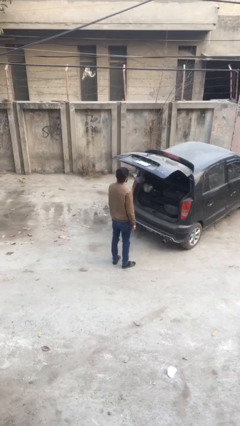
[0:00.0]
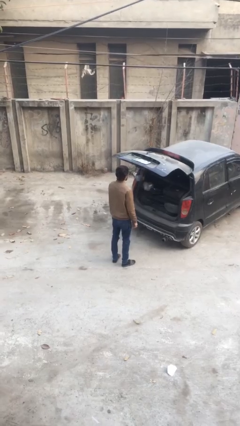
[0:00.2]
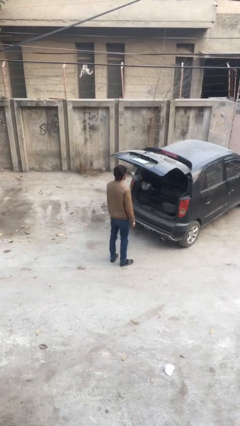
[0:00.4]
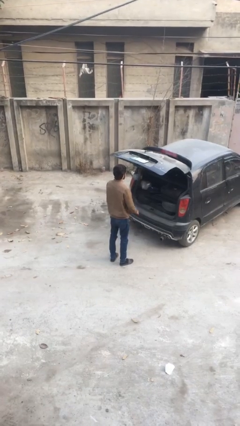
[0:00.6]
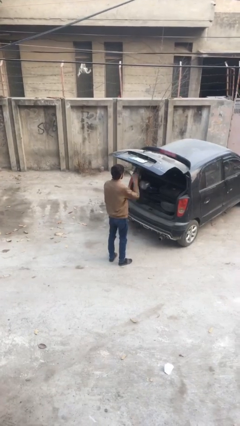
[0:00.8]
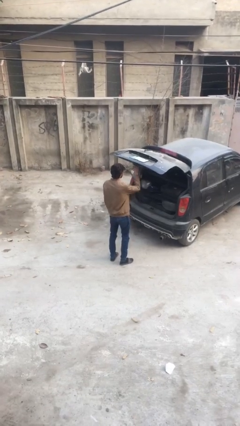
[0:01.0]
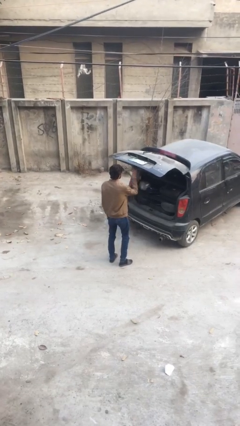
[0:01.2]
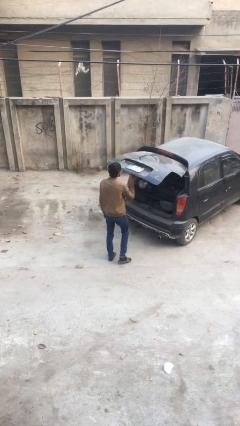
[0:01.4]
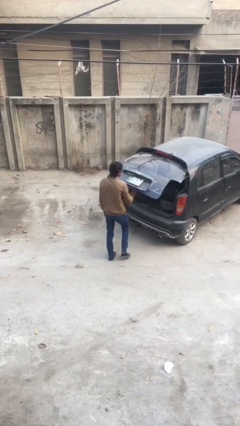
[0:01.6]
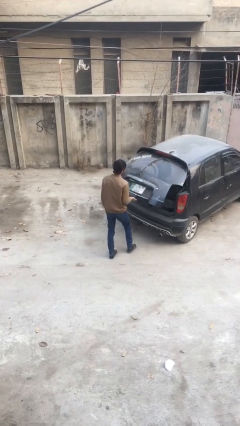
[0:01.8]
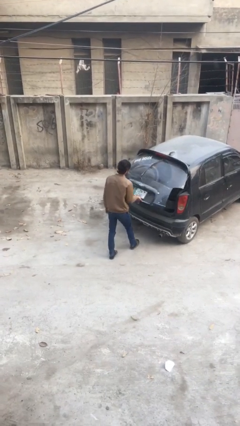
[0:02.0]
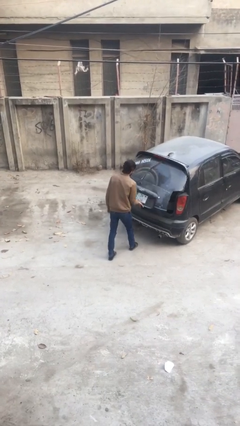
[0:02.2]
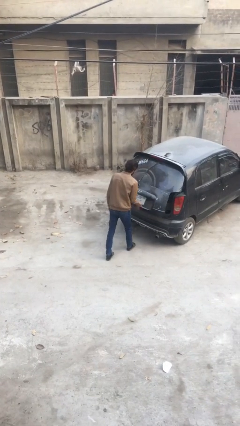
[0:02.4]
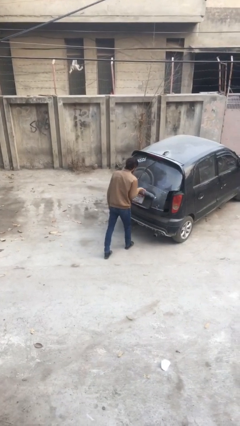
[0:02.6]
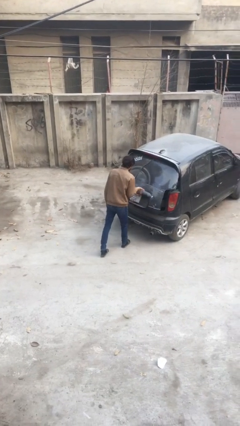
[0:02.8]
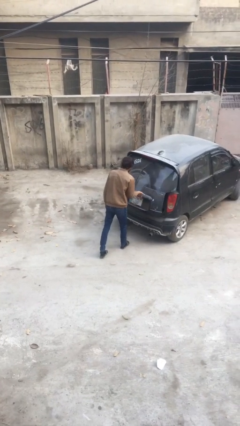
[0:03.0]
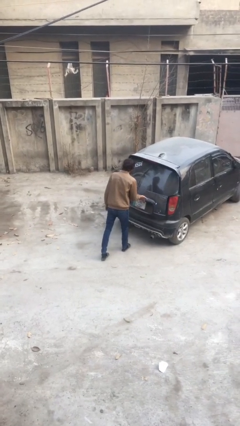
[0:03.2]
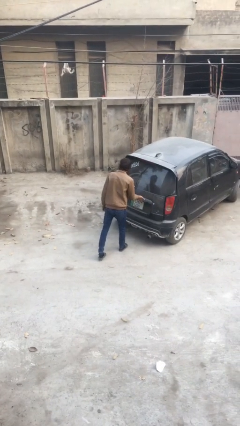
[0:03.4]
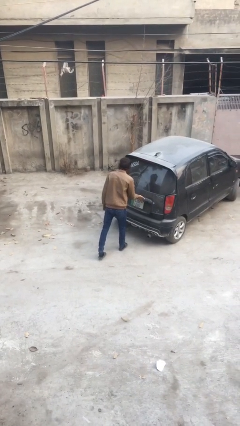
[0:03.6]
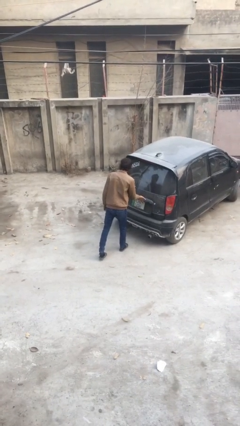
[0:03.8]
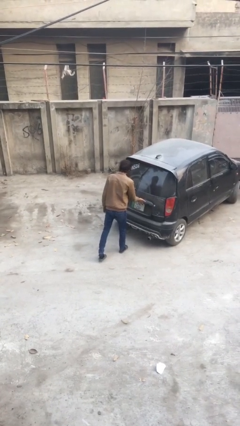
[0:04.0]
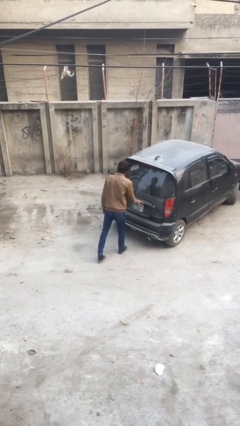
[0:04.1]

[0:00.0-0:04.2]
person closes car trunk

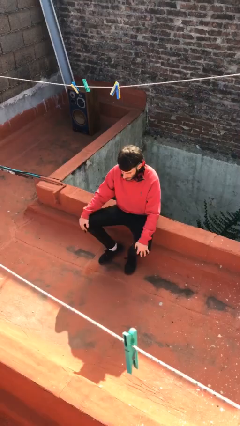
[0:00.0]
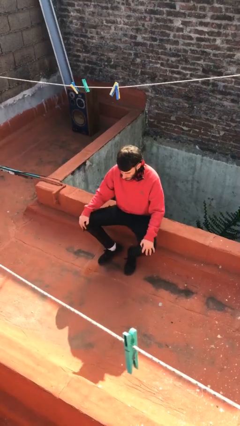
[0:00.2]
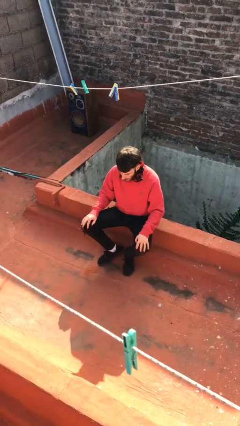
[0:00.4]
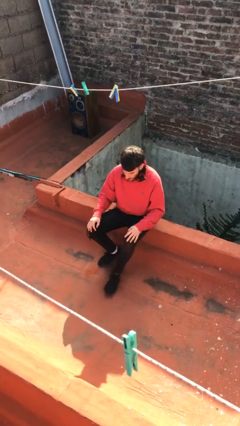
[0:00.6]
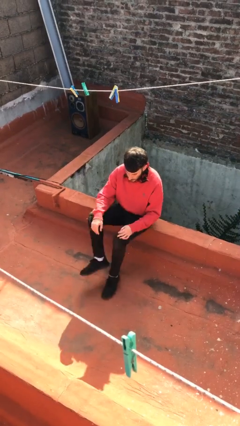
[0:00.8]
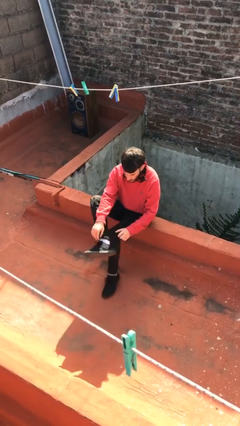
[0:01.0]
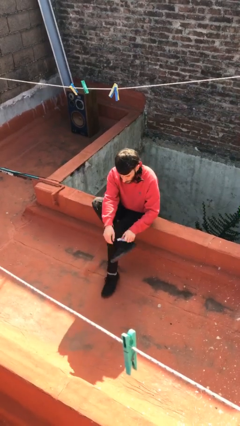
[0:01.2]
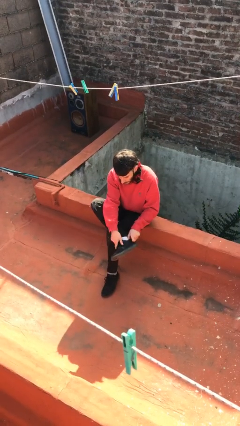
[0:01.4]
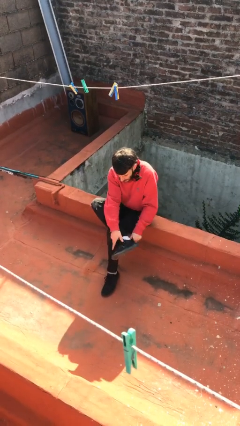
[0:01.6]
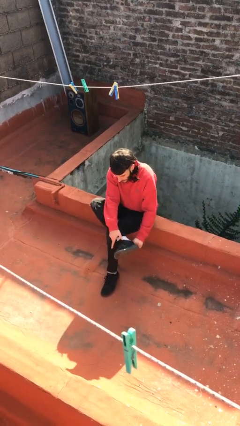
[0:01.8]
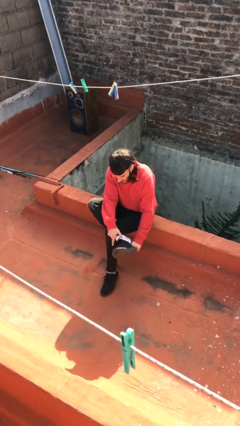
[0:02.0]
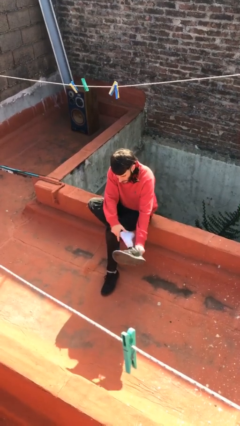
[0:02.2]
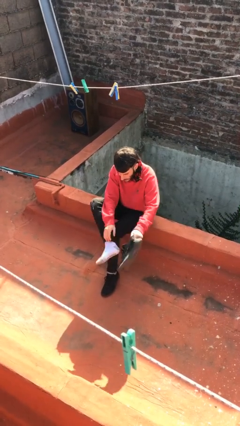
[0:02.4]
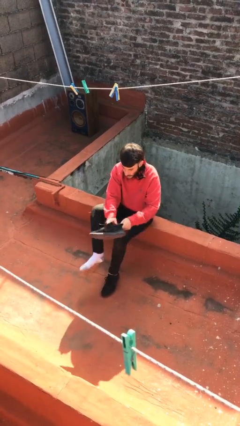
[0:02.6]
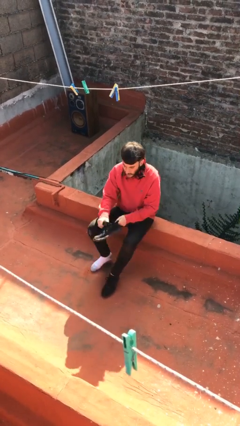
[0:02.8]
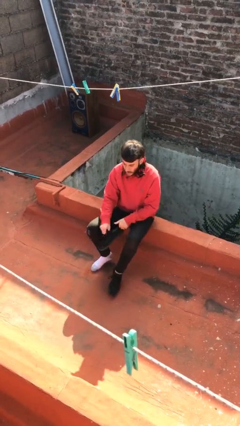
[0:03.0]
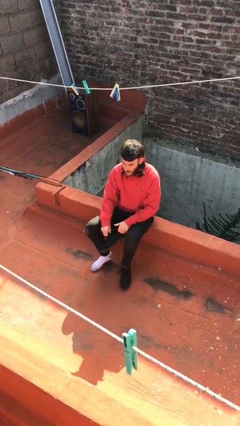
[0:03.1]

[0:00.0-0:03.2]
person takes off shoes

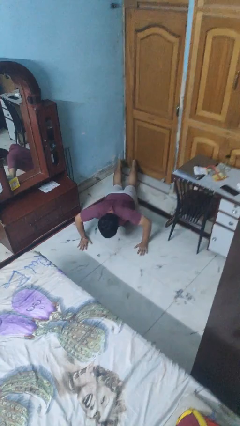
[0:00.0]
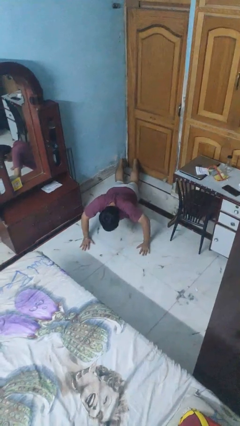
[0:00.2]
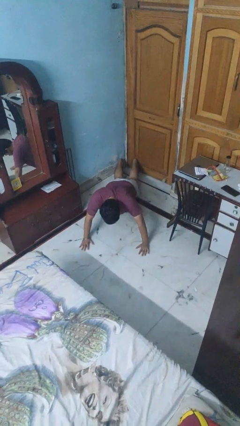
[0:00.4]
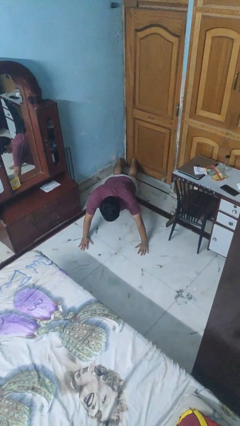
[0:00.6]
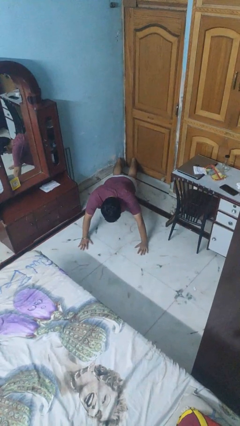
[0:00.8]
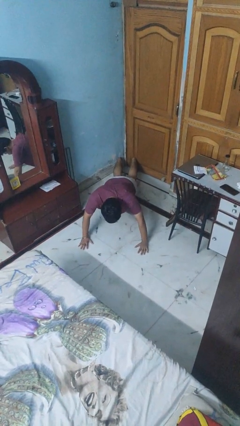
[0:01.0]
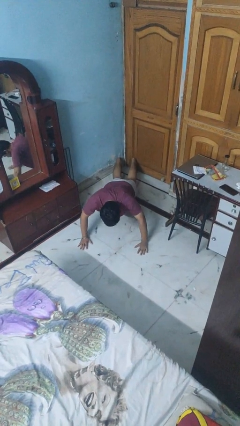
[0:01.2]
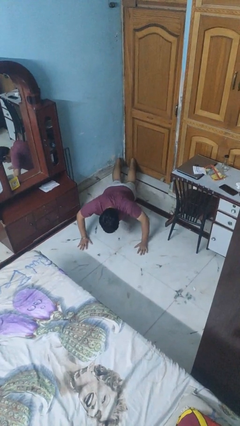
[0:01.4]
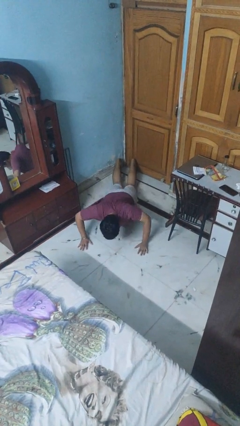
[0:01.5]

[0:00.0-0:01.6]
person exercises with pushup

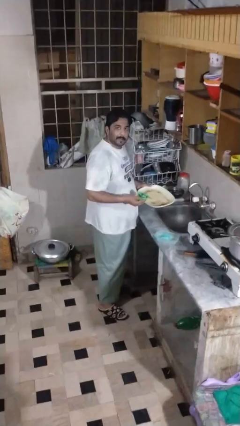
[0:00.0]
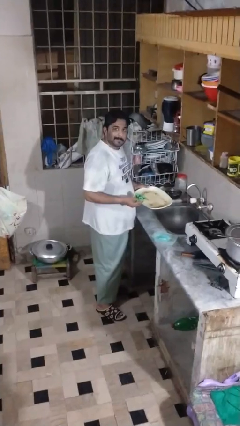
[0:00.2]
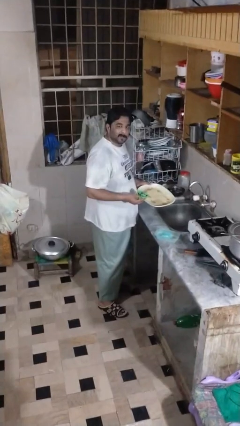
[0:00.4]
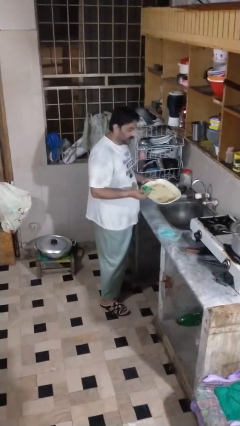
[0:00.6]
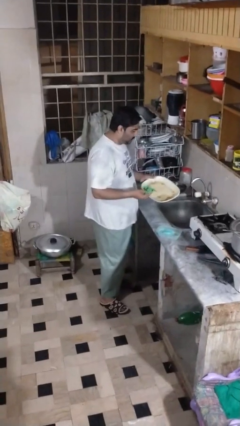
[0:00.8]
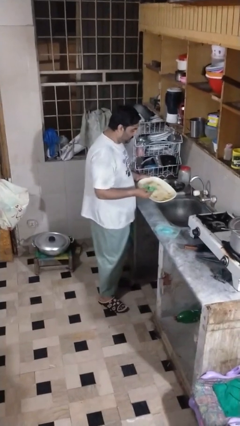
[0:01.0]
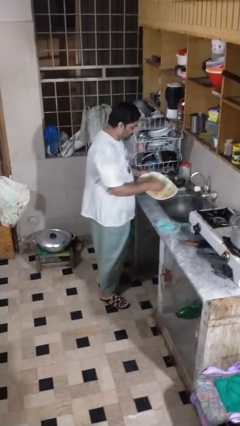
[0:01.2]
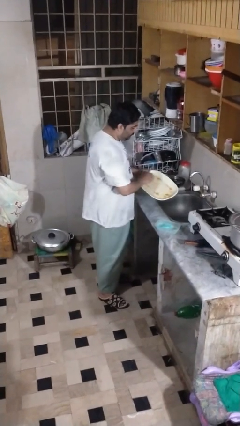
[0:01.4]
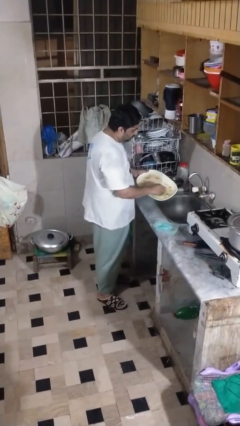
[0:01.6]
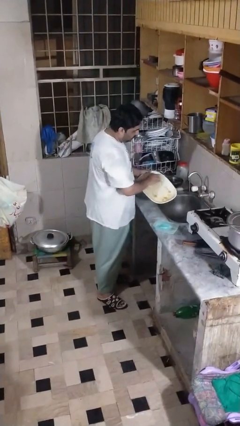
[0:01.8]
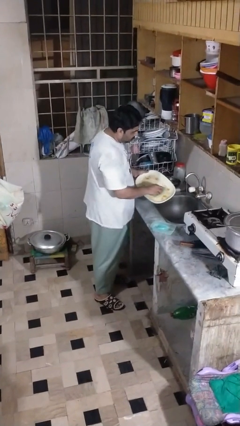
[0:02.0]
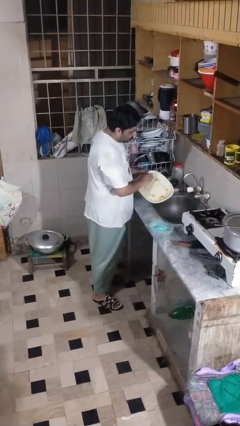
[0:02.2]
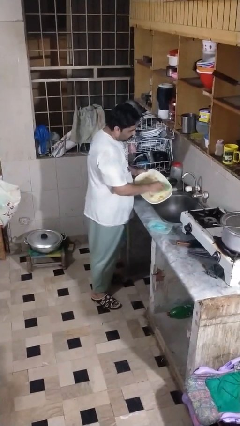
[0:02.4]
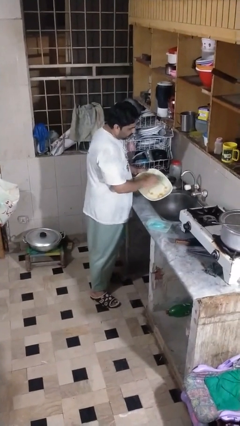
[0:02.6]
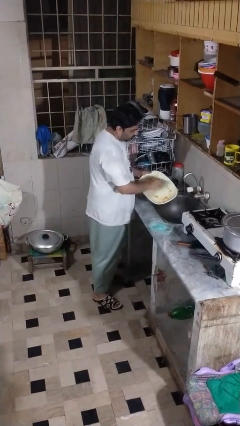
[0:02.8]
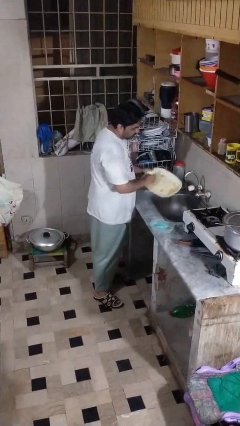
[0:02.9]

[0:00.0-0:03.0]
person washes dish

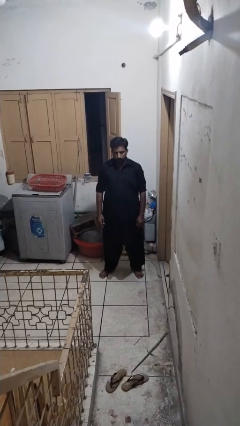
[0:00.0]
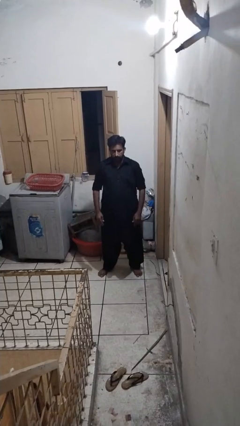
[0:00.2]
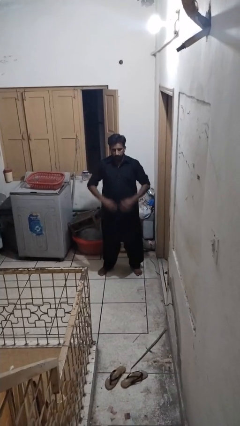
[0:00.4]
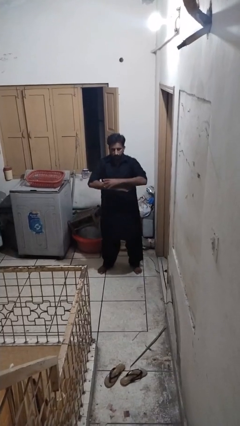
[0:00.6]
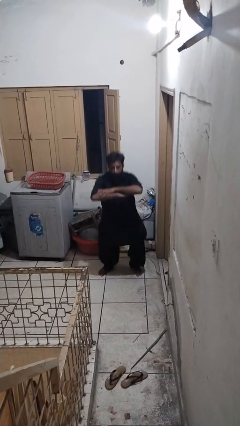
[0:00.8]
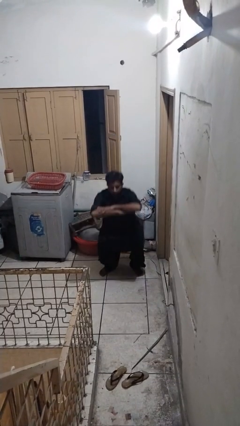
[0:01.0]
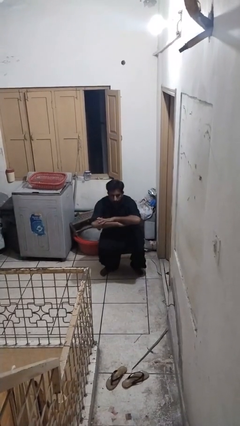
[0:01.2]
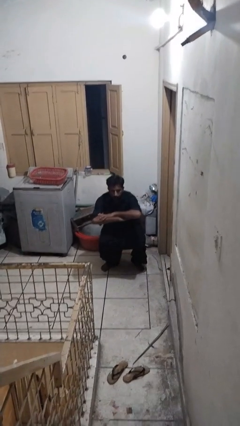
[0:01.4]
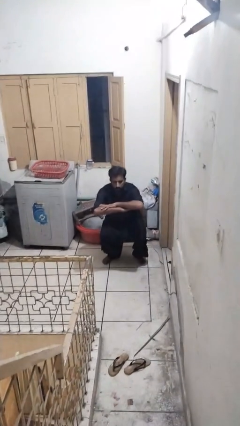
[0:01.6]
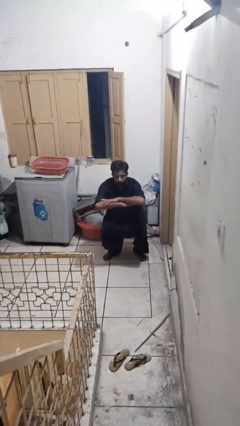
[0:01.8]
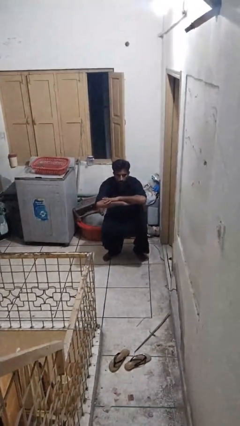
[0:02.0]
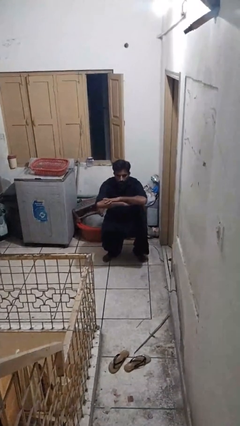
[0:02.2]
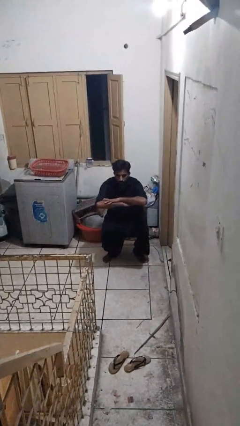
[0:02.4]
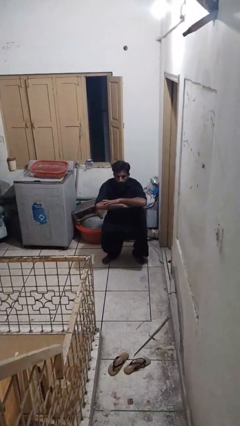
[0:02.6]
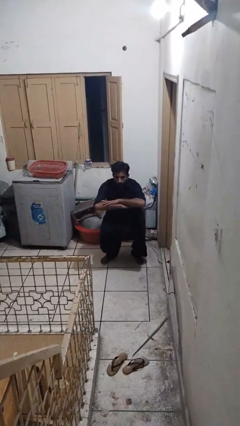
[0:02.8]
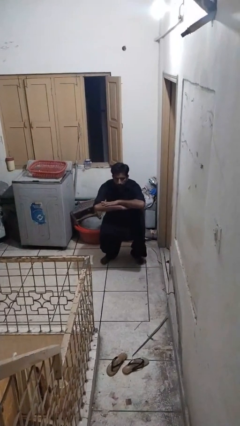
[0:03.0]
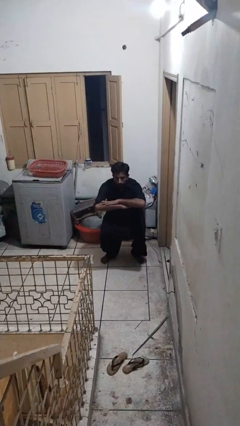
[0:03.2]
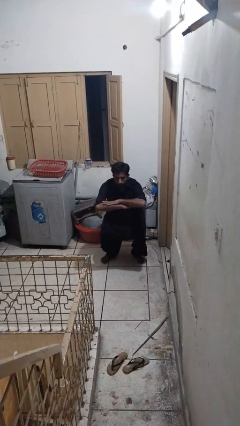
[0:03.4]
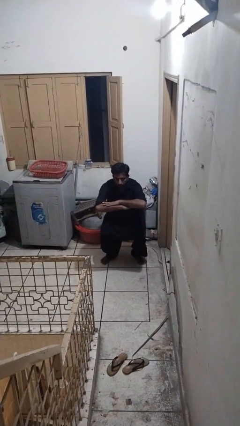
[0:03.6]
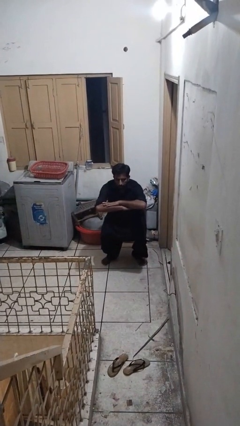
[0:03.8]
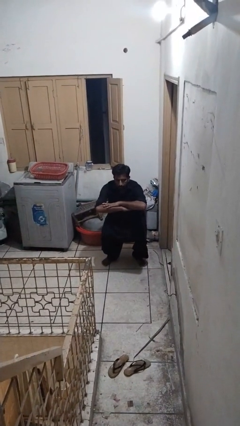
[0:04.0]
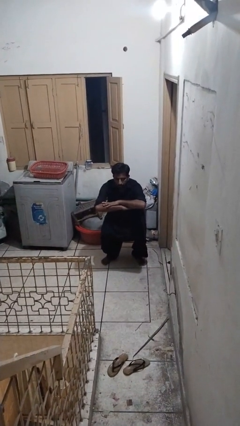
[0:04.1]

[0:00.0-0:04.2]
person squats

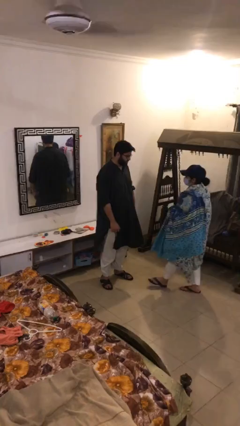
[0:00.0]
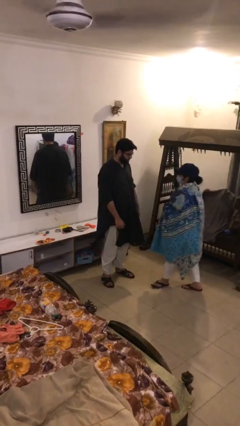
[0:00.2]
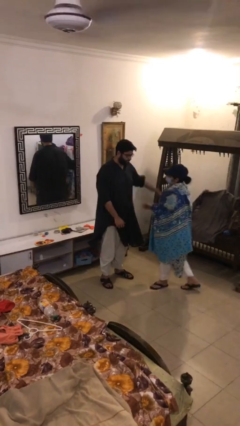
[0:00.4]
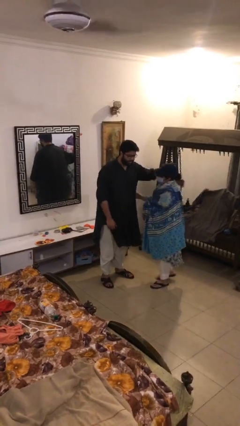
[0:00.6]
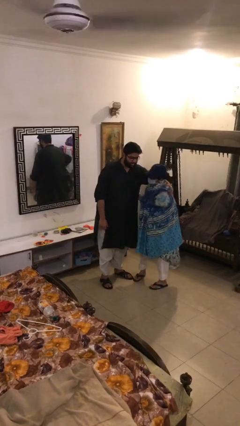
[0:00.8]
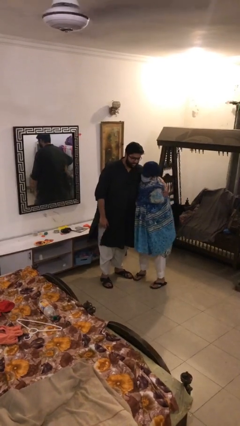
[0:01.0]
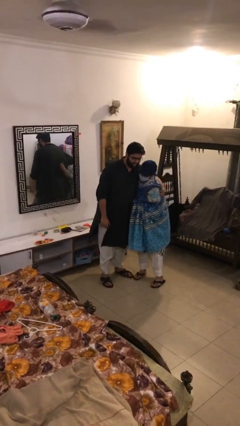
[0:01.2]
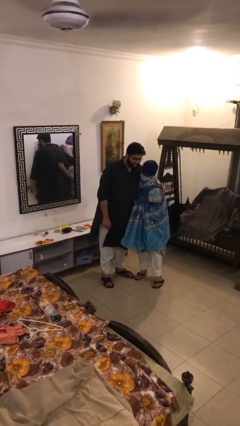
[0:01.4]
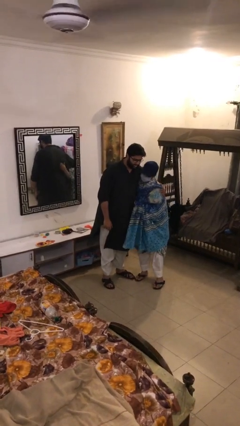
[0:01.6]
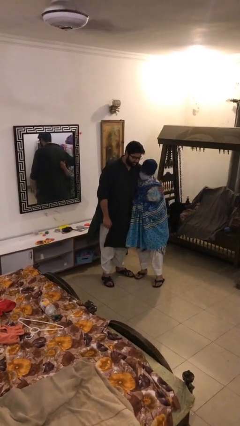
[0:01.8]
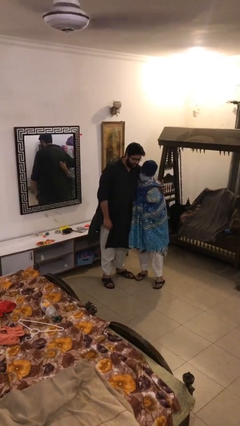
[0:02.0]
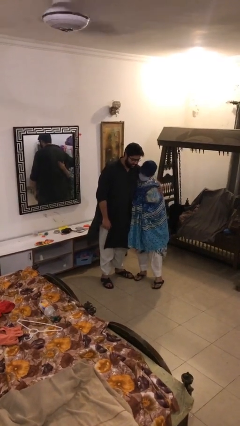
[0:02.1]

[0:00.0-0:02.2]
person embraces person
